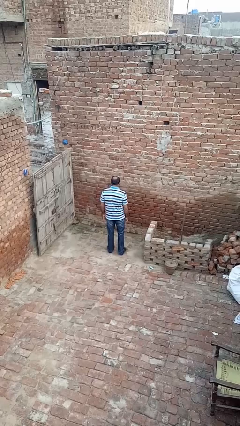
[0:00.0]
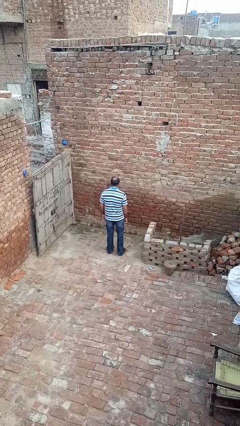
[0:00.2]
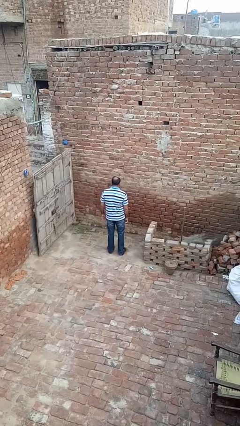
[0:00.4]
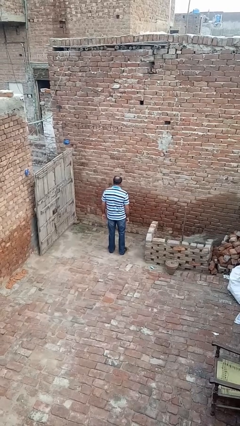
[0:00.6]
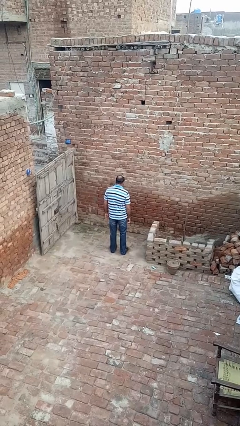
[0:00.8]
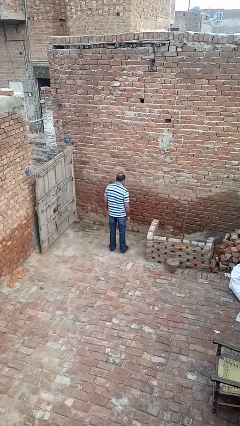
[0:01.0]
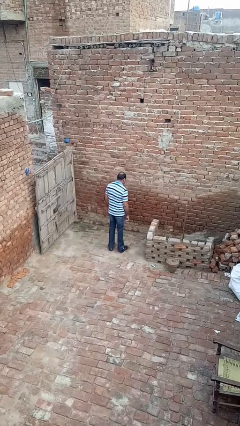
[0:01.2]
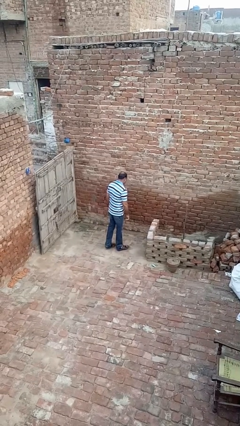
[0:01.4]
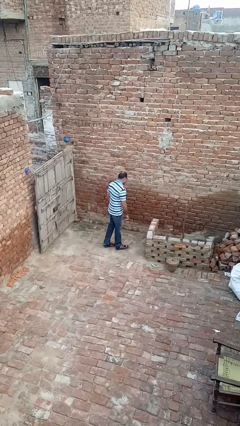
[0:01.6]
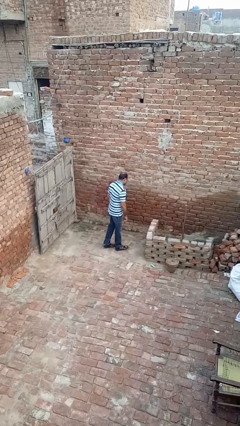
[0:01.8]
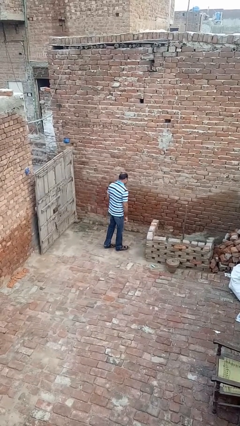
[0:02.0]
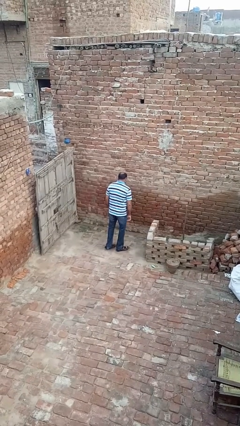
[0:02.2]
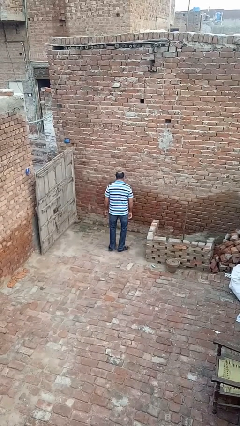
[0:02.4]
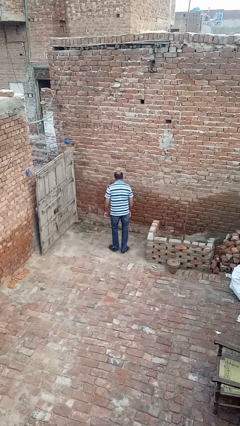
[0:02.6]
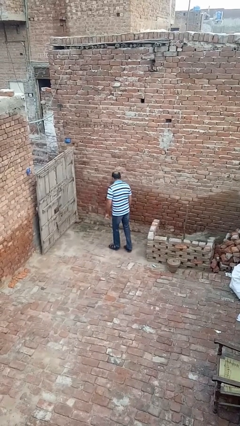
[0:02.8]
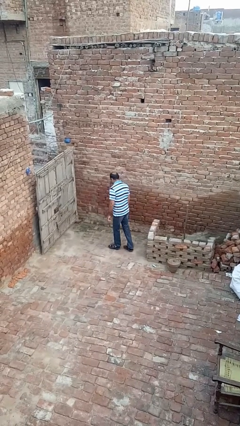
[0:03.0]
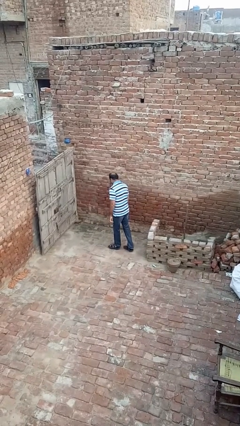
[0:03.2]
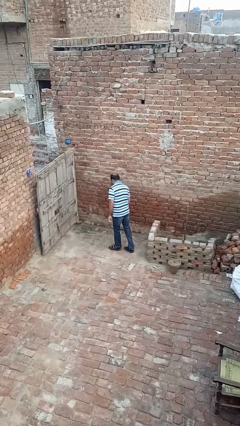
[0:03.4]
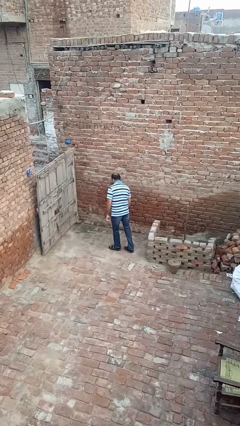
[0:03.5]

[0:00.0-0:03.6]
person twirls

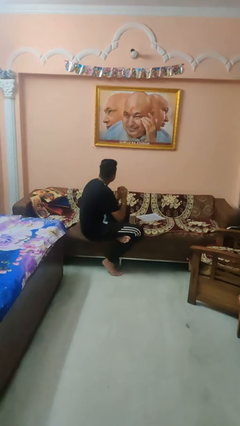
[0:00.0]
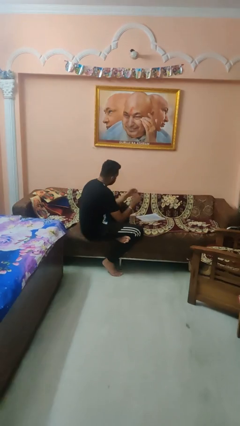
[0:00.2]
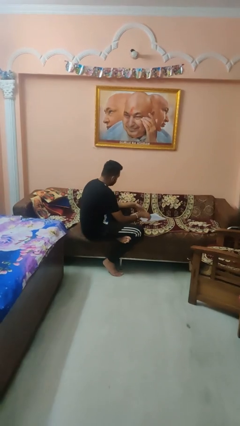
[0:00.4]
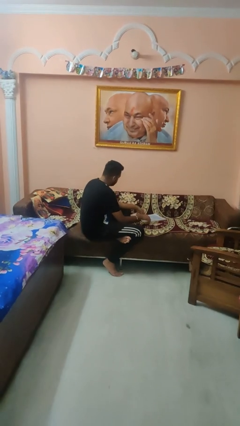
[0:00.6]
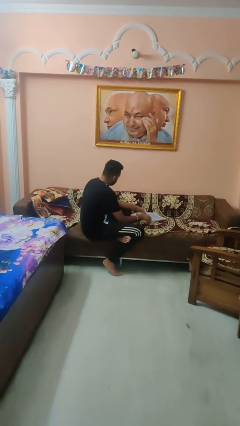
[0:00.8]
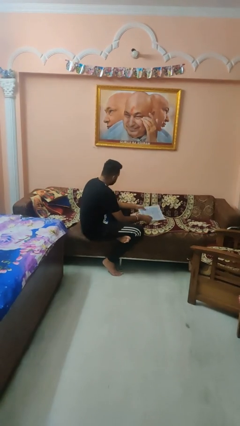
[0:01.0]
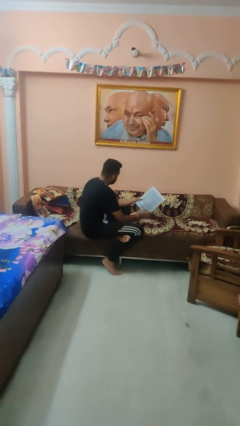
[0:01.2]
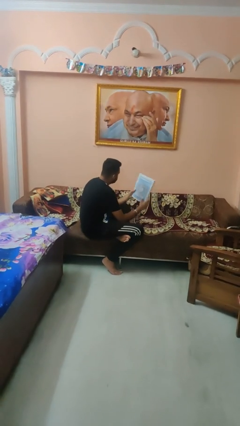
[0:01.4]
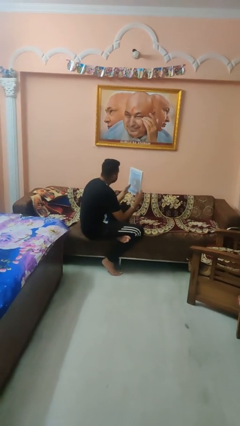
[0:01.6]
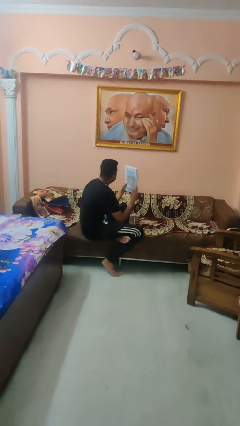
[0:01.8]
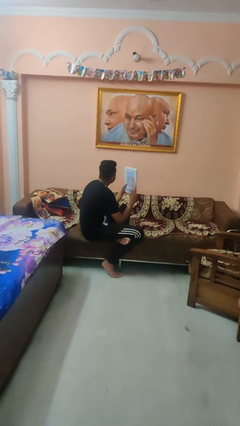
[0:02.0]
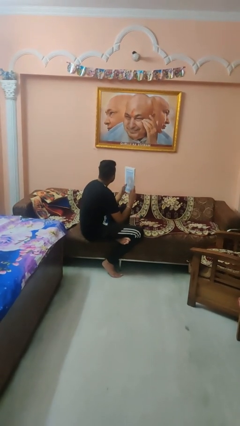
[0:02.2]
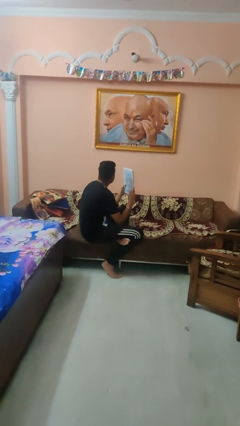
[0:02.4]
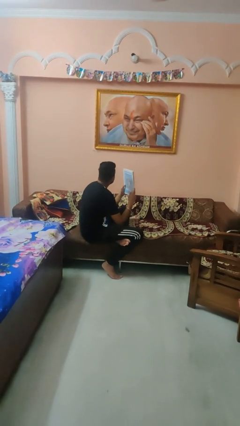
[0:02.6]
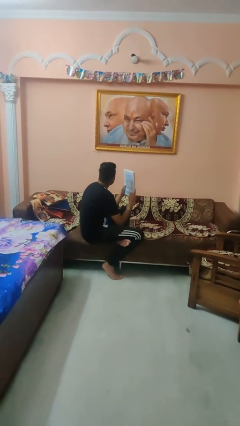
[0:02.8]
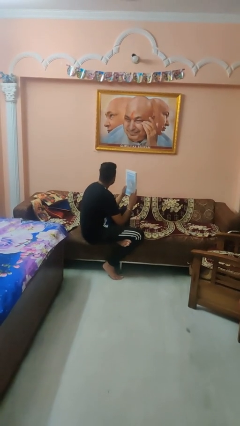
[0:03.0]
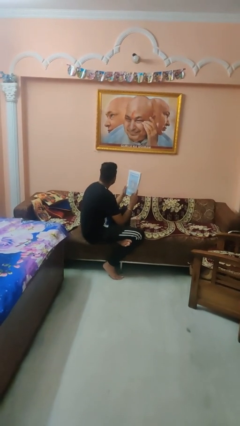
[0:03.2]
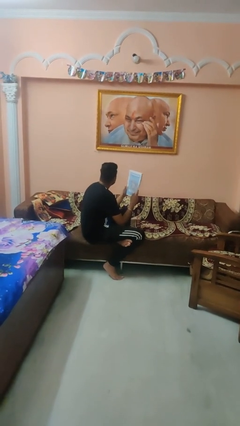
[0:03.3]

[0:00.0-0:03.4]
person picks up object from couch

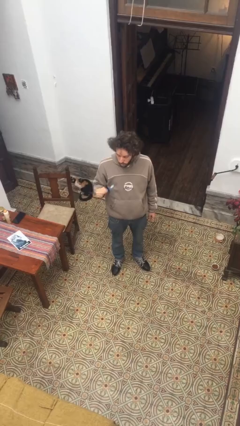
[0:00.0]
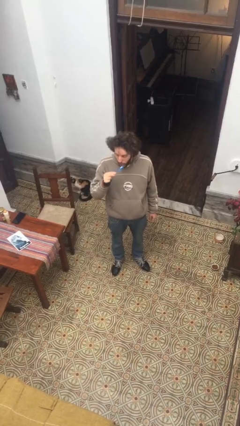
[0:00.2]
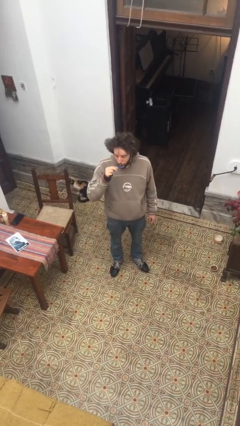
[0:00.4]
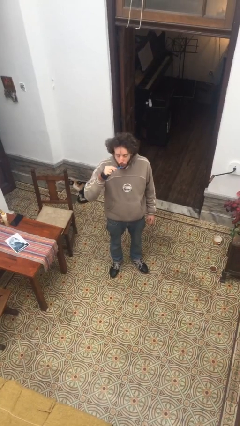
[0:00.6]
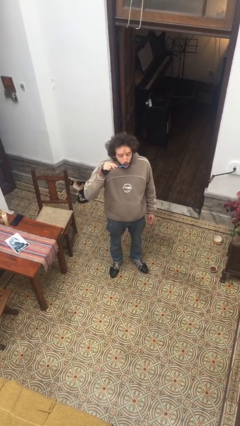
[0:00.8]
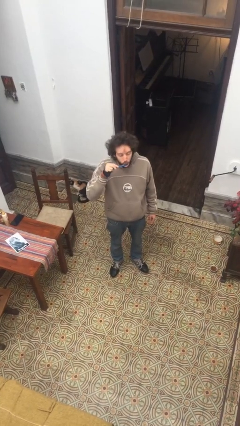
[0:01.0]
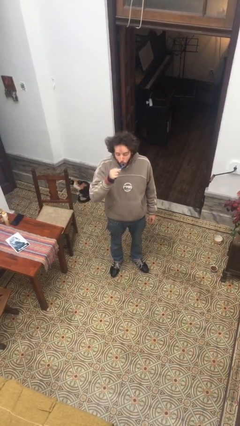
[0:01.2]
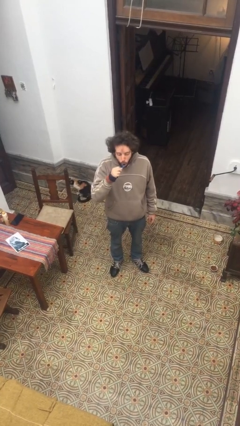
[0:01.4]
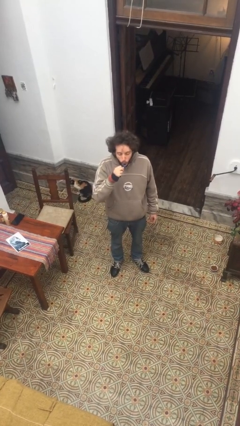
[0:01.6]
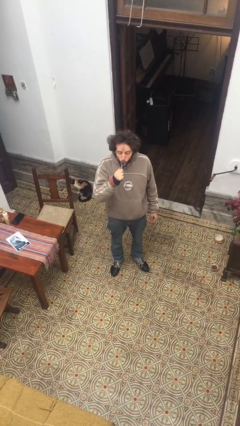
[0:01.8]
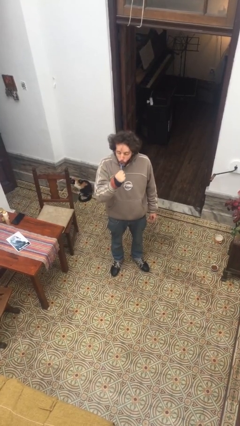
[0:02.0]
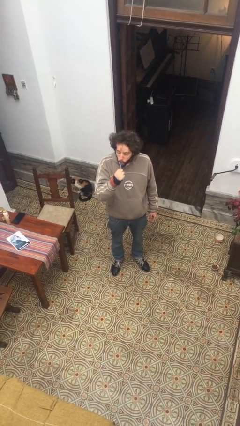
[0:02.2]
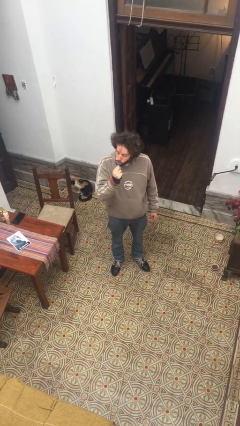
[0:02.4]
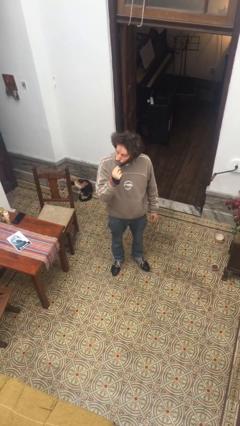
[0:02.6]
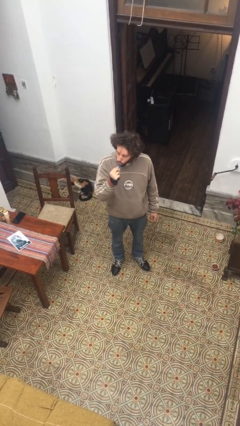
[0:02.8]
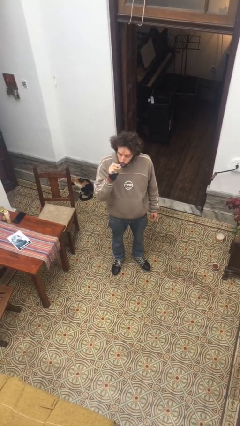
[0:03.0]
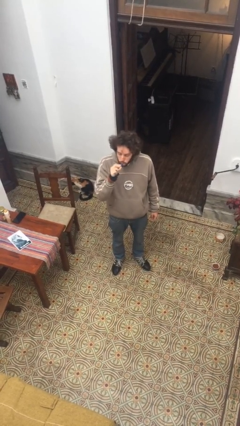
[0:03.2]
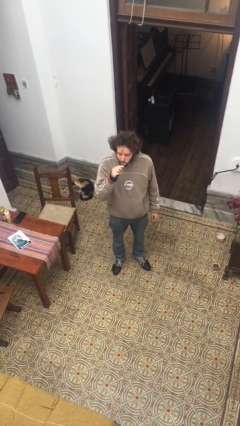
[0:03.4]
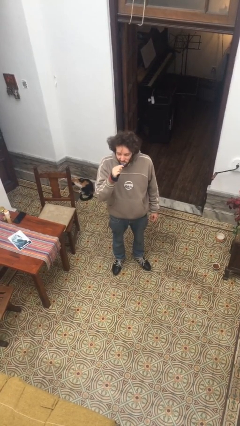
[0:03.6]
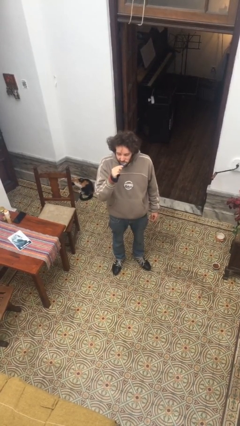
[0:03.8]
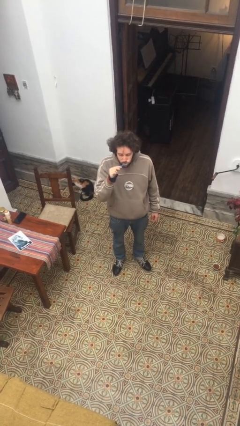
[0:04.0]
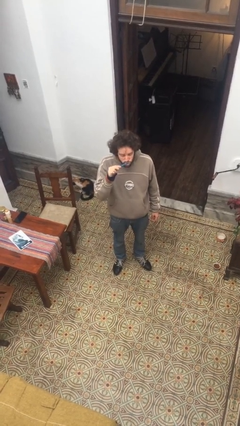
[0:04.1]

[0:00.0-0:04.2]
person brushes teeth

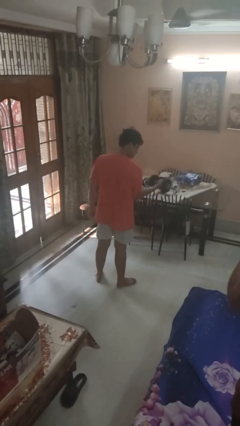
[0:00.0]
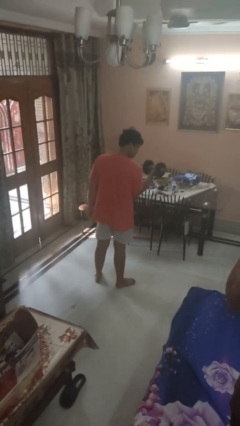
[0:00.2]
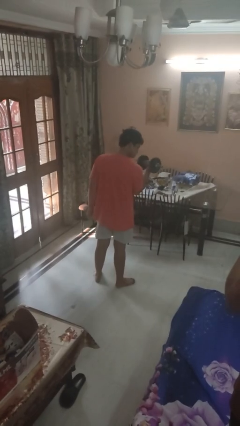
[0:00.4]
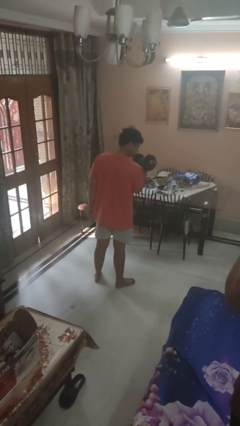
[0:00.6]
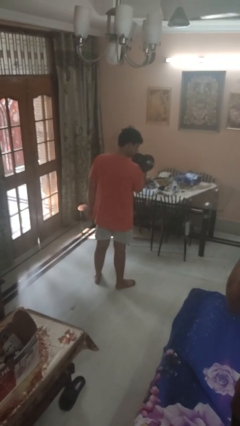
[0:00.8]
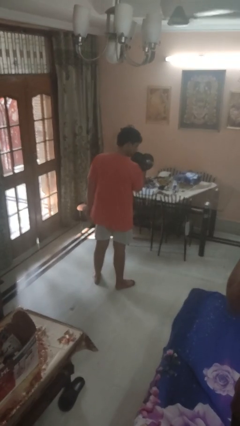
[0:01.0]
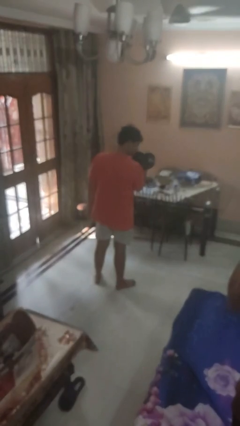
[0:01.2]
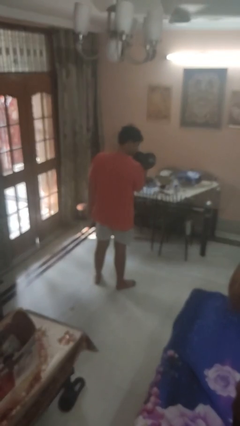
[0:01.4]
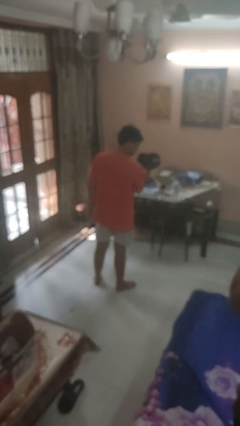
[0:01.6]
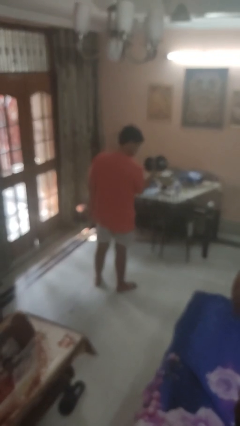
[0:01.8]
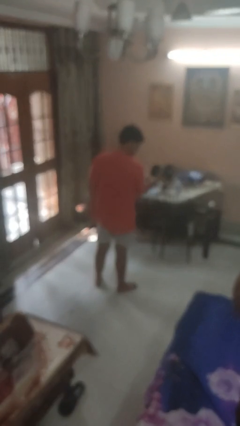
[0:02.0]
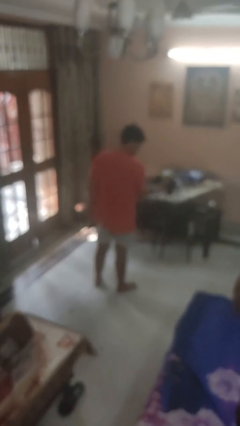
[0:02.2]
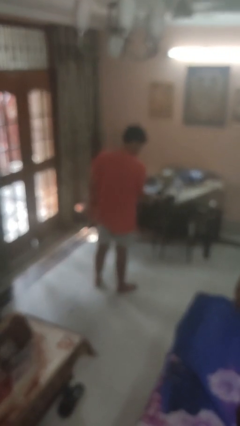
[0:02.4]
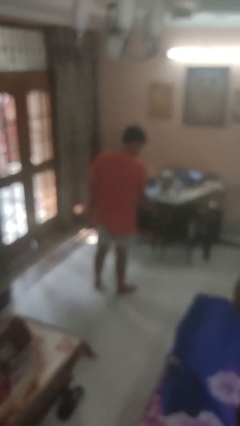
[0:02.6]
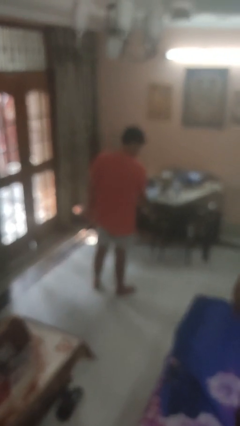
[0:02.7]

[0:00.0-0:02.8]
person lifts dumbbells

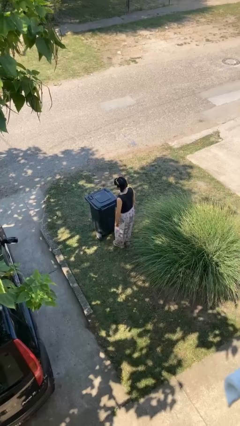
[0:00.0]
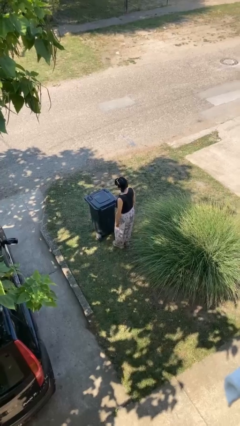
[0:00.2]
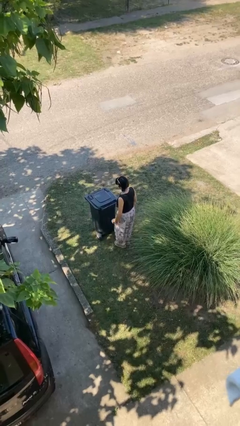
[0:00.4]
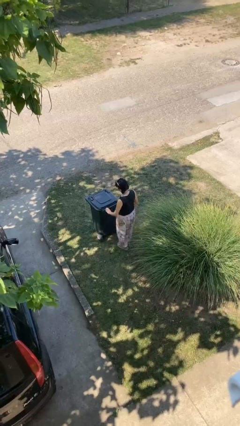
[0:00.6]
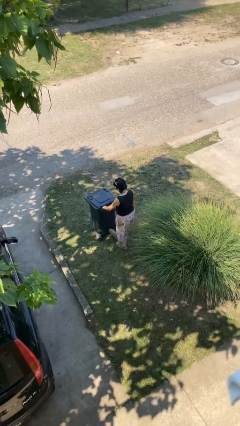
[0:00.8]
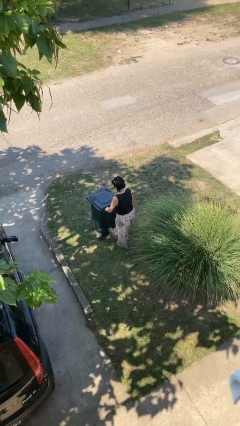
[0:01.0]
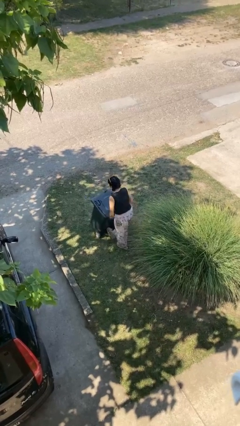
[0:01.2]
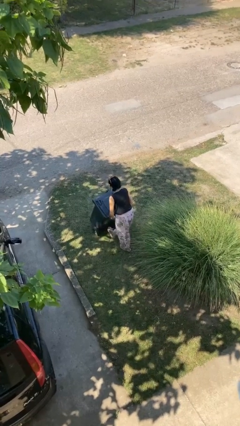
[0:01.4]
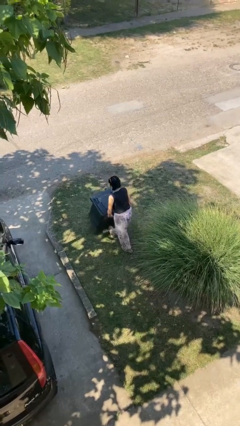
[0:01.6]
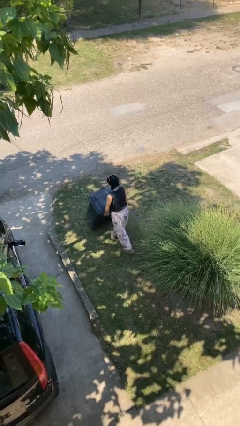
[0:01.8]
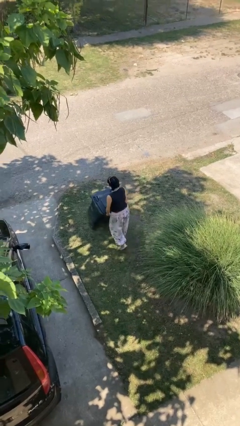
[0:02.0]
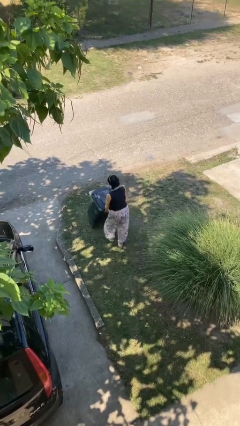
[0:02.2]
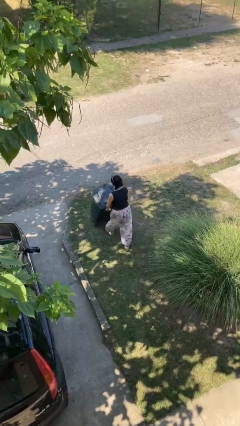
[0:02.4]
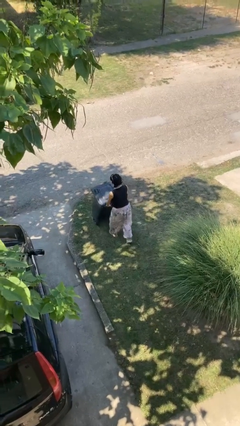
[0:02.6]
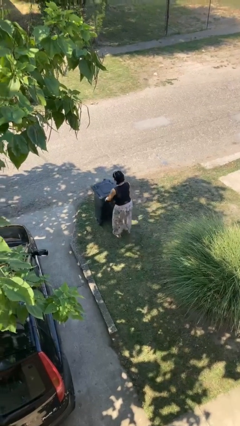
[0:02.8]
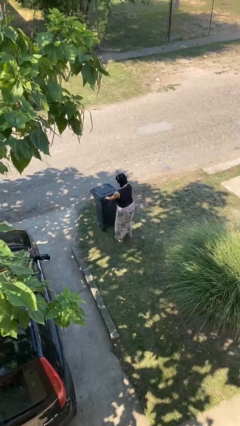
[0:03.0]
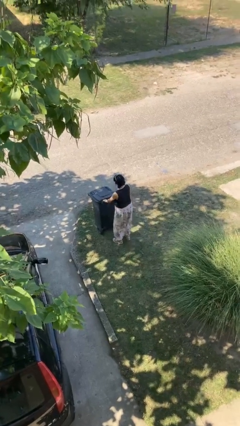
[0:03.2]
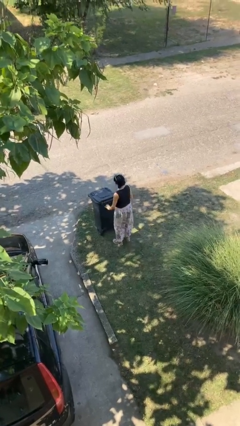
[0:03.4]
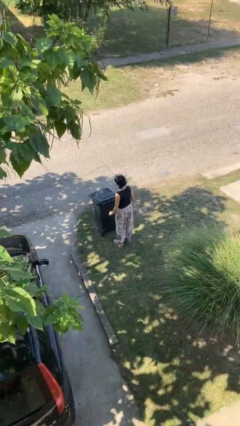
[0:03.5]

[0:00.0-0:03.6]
person pushes wheeled trashcan

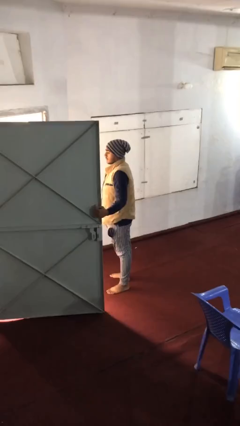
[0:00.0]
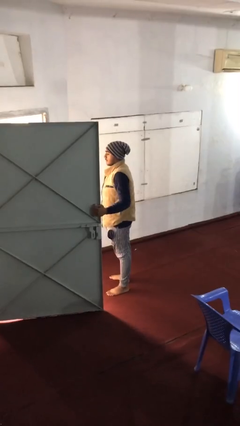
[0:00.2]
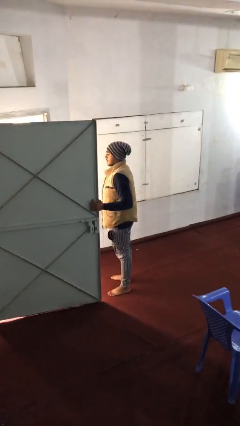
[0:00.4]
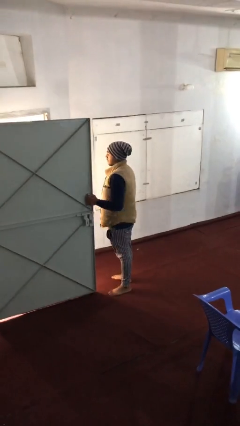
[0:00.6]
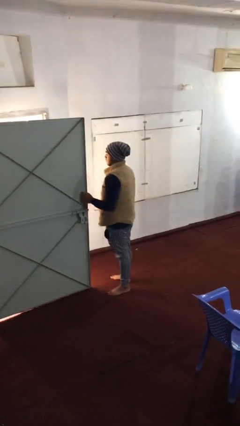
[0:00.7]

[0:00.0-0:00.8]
person closes facility door
